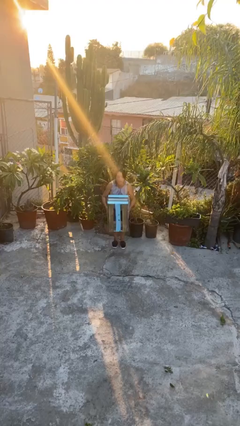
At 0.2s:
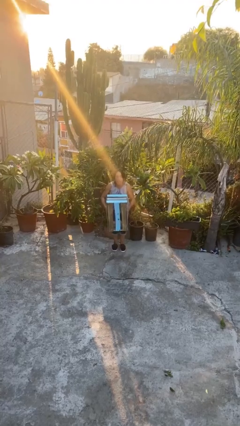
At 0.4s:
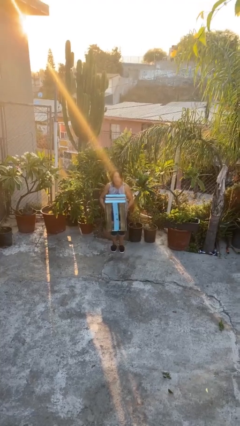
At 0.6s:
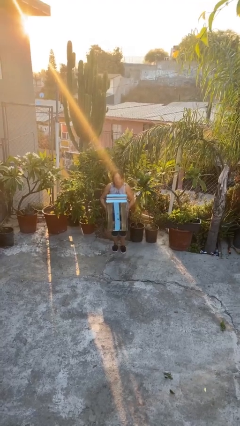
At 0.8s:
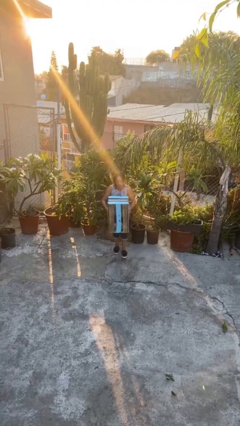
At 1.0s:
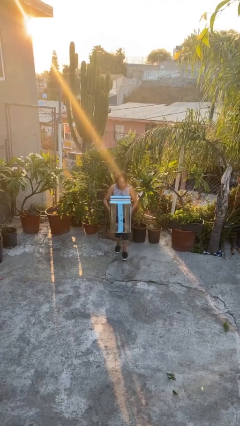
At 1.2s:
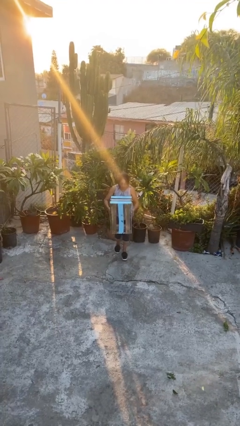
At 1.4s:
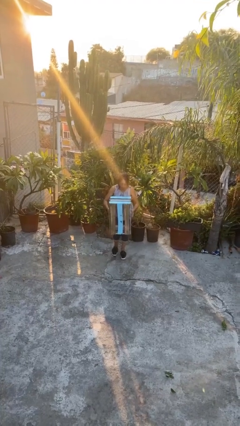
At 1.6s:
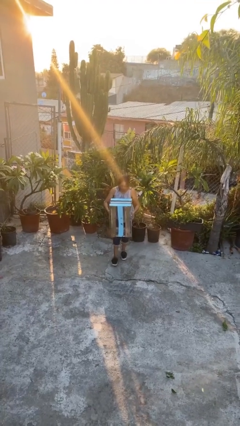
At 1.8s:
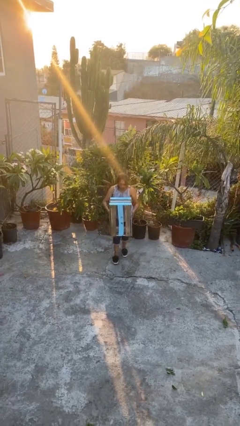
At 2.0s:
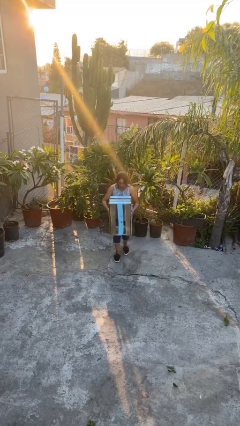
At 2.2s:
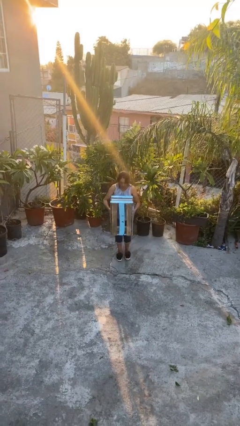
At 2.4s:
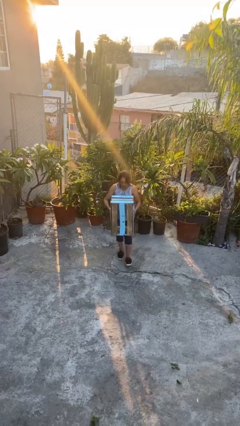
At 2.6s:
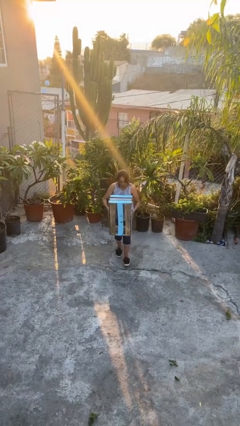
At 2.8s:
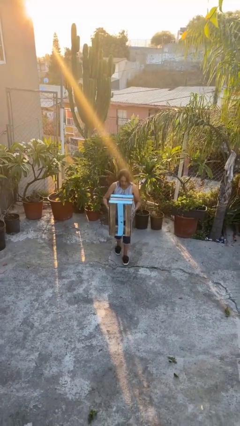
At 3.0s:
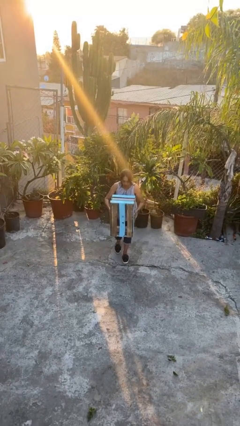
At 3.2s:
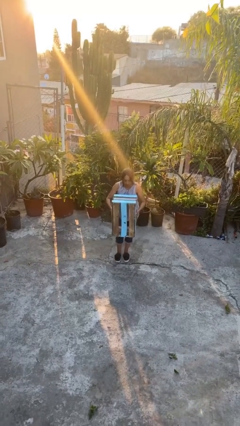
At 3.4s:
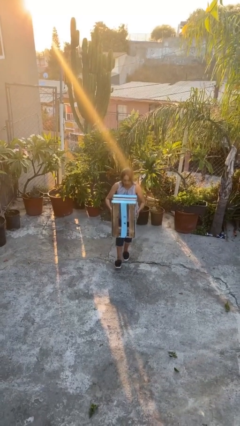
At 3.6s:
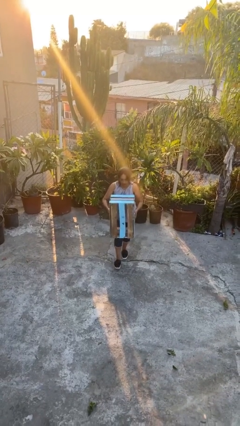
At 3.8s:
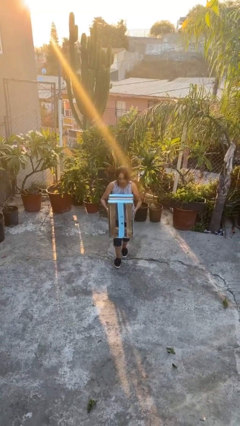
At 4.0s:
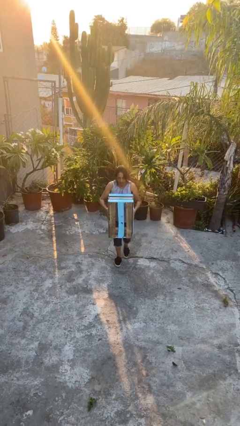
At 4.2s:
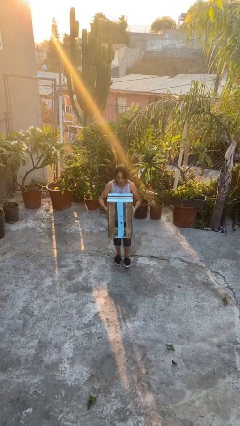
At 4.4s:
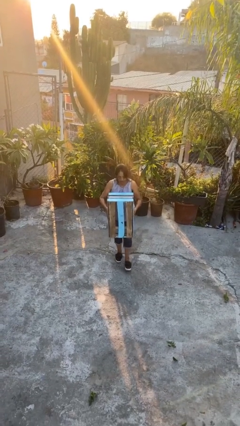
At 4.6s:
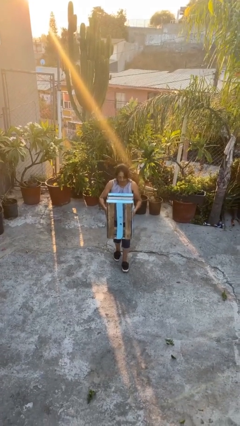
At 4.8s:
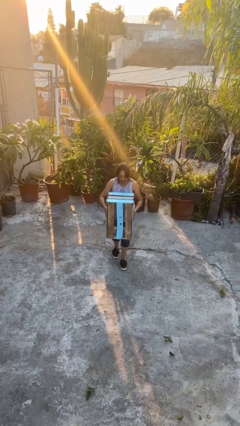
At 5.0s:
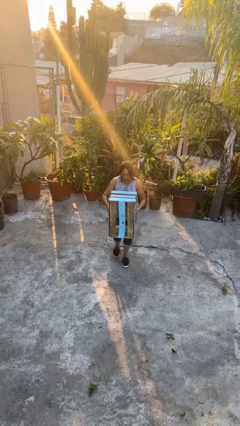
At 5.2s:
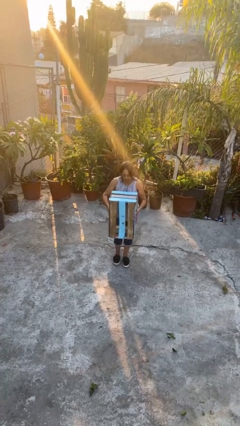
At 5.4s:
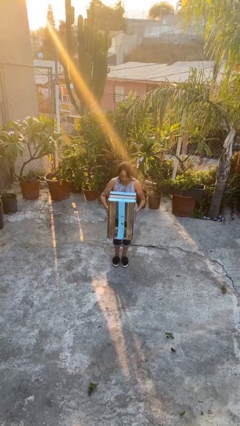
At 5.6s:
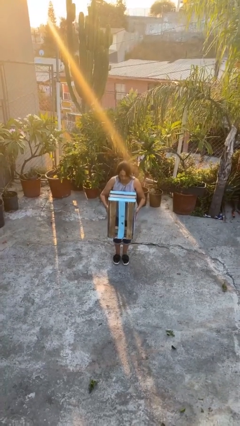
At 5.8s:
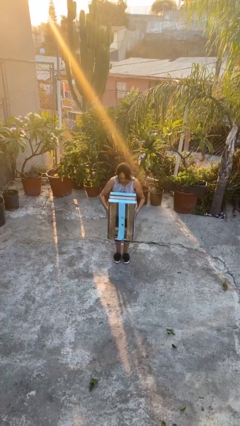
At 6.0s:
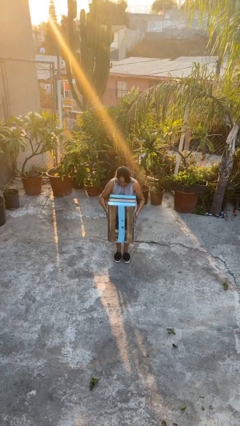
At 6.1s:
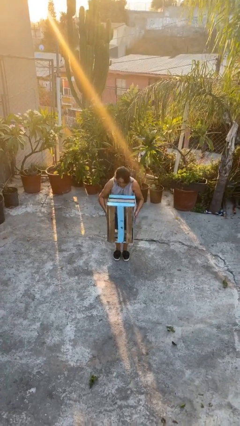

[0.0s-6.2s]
person carries heavy object

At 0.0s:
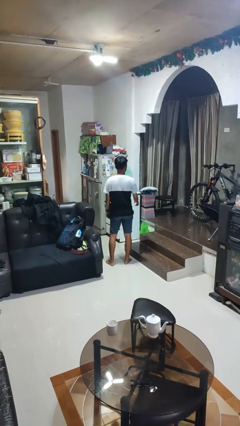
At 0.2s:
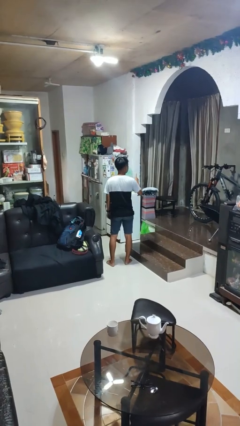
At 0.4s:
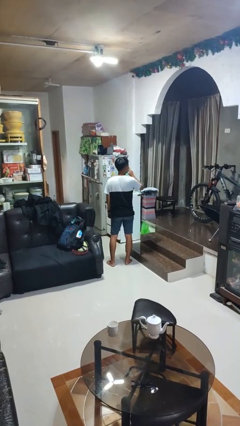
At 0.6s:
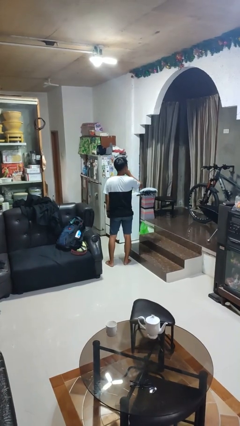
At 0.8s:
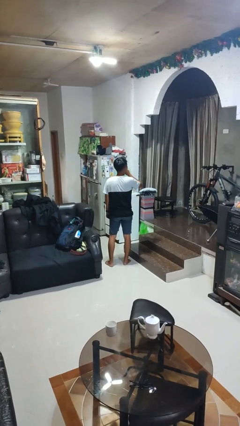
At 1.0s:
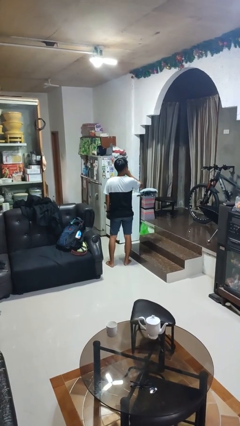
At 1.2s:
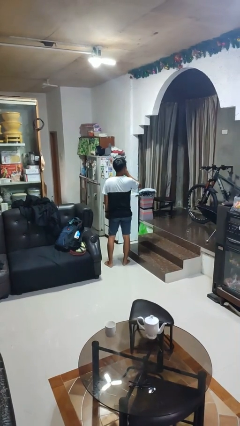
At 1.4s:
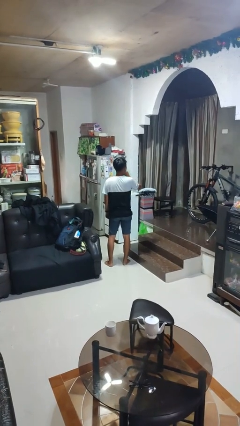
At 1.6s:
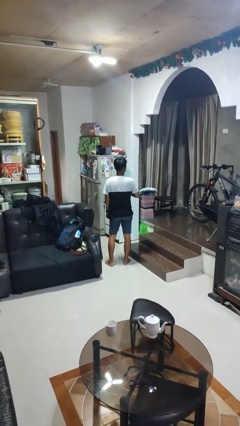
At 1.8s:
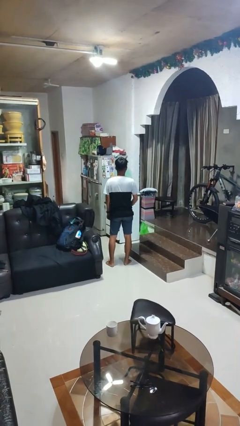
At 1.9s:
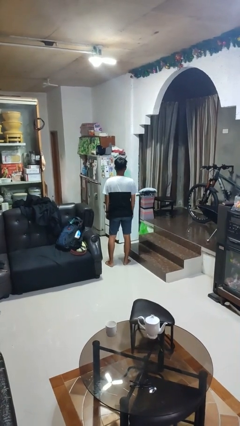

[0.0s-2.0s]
person gestures behind me

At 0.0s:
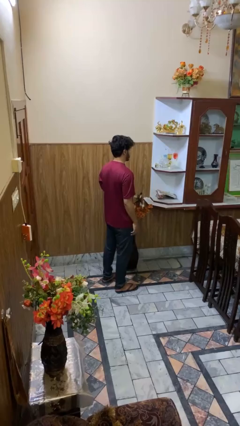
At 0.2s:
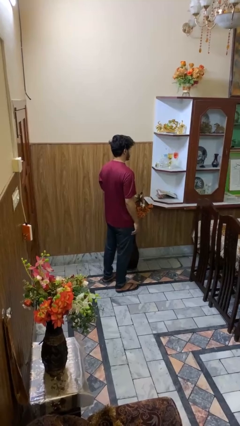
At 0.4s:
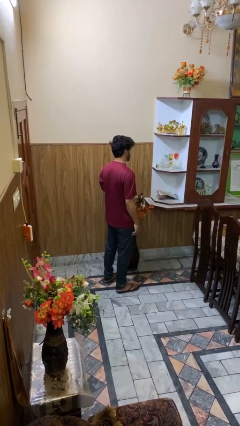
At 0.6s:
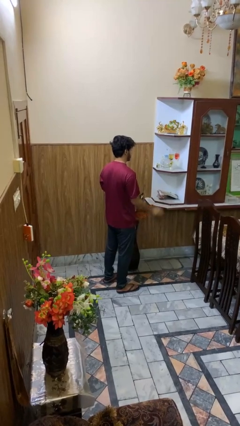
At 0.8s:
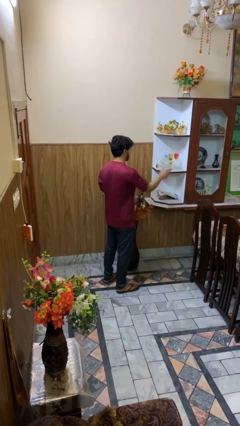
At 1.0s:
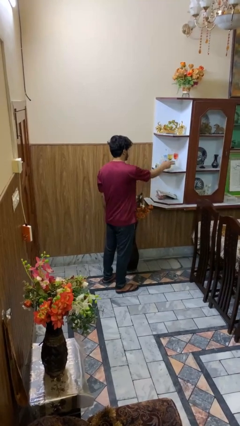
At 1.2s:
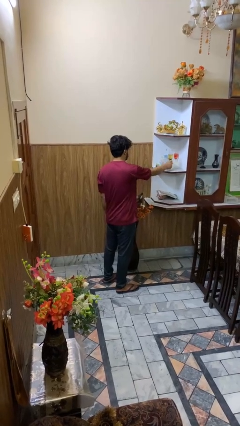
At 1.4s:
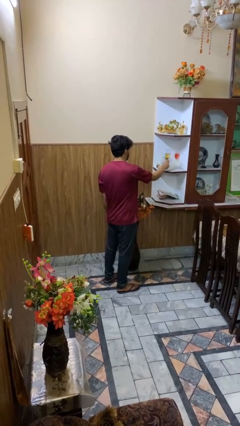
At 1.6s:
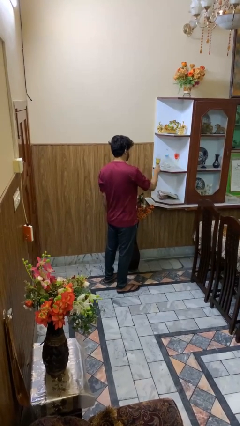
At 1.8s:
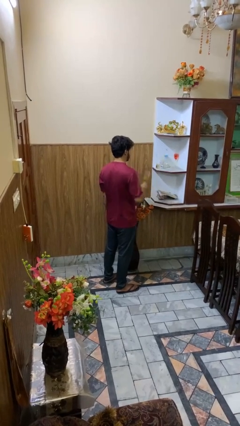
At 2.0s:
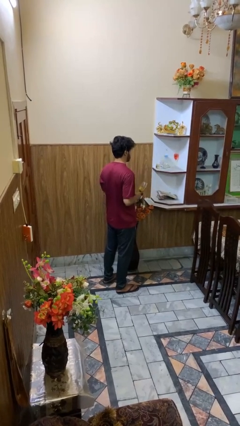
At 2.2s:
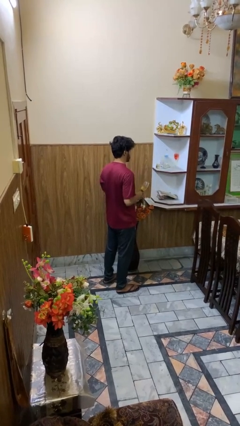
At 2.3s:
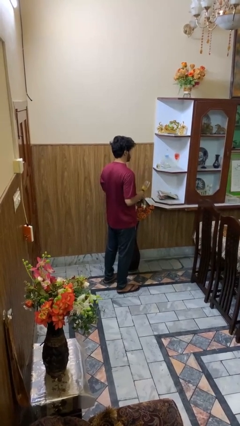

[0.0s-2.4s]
person picks up object from cabinet

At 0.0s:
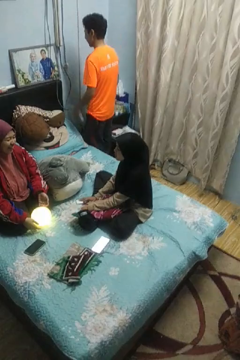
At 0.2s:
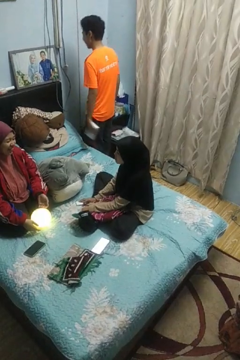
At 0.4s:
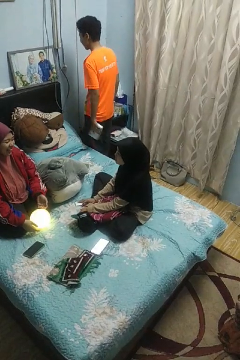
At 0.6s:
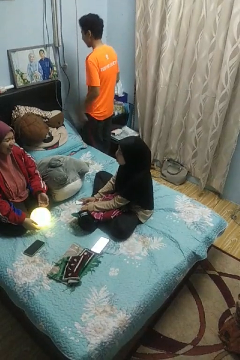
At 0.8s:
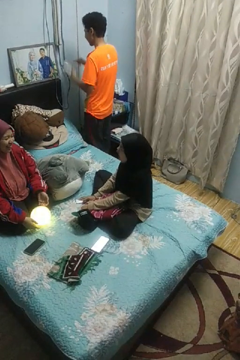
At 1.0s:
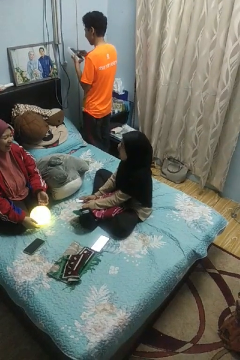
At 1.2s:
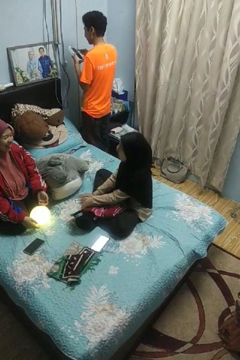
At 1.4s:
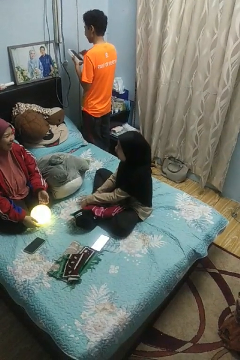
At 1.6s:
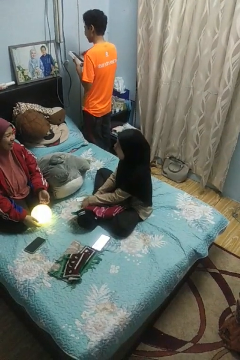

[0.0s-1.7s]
person laughs with person

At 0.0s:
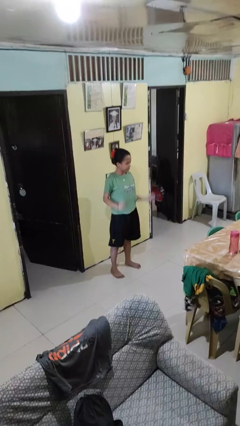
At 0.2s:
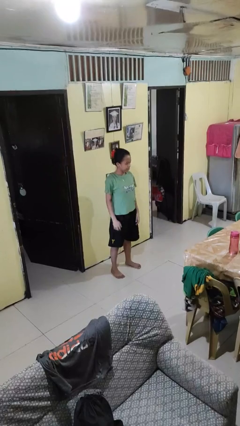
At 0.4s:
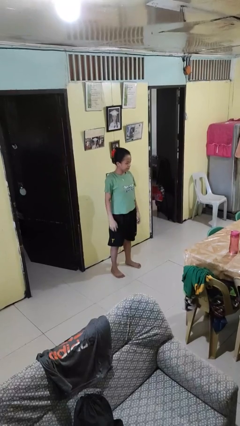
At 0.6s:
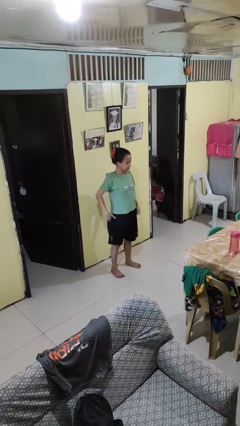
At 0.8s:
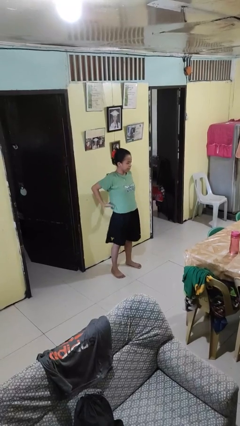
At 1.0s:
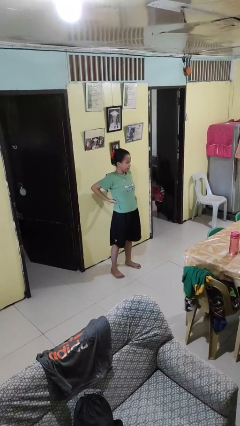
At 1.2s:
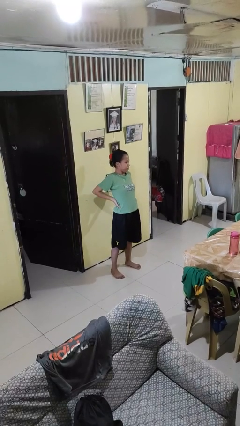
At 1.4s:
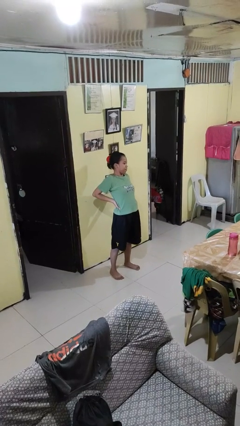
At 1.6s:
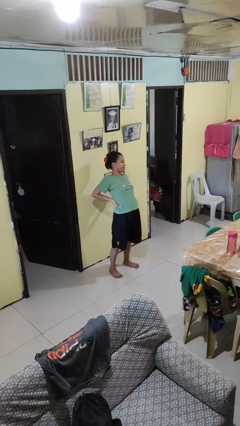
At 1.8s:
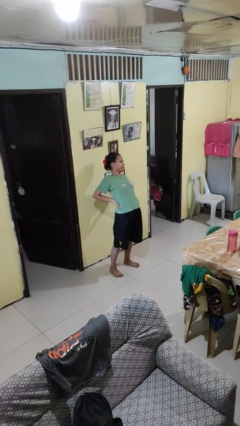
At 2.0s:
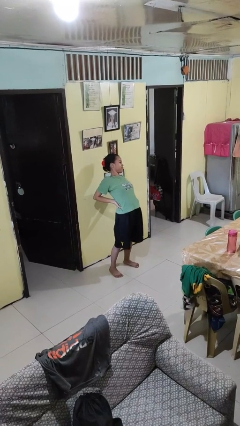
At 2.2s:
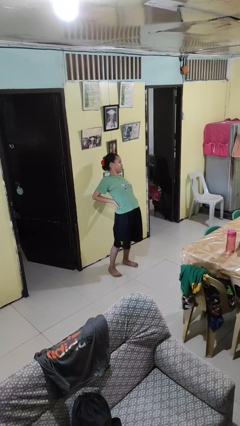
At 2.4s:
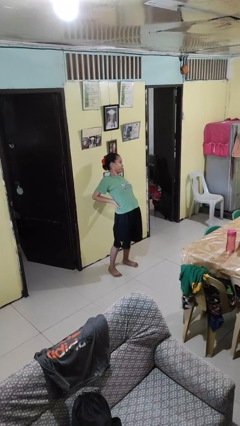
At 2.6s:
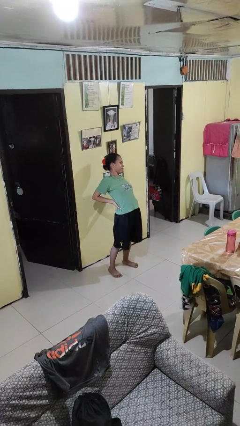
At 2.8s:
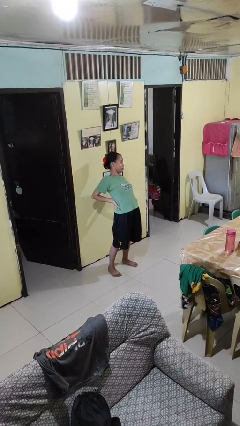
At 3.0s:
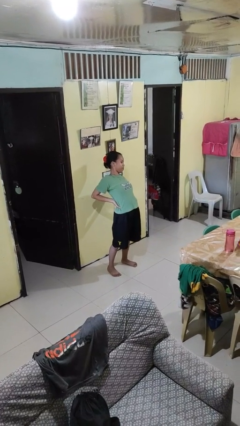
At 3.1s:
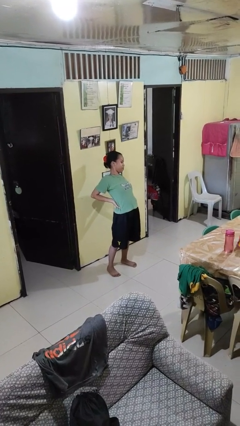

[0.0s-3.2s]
person stretches back

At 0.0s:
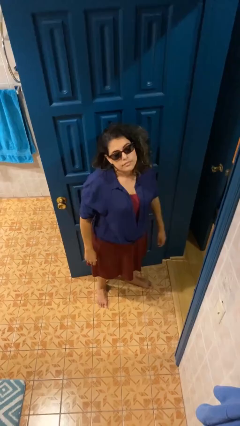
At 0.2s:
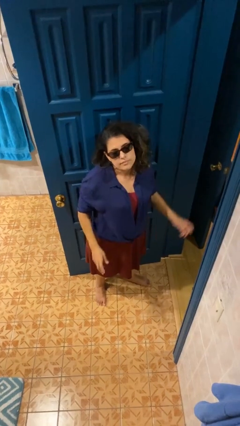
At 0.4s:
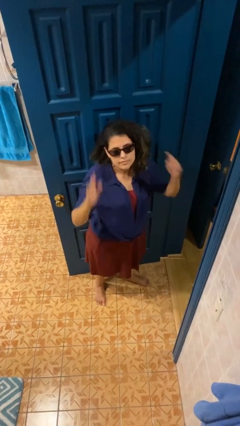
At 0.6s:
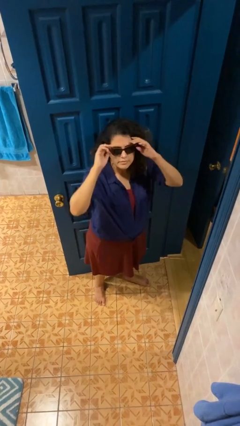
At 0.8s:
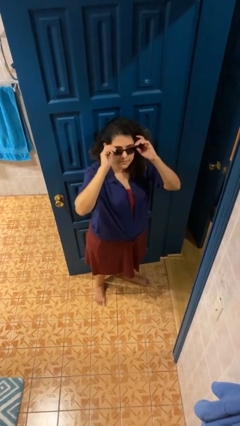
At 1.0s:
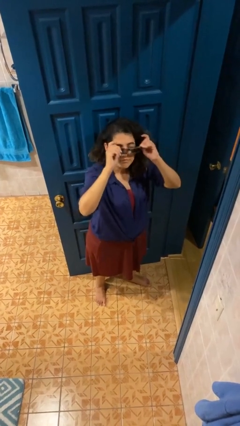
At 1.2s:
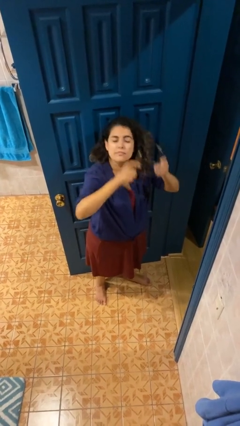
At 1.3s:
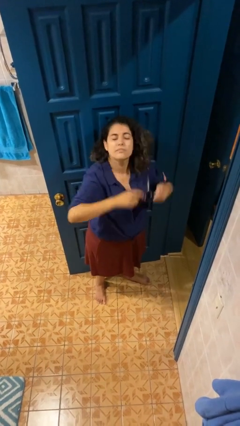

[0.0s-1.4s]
person takes off sunglasses

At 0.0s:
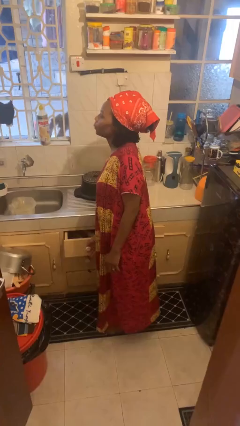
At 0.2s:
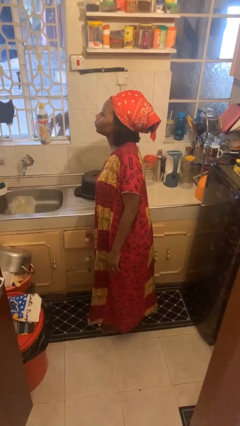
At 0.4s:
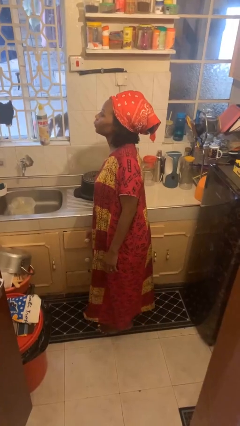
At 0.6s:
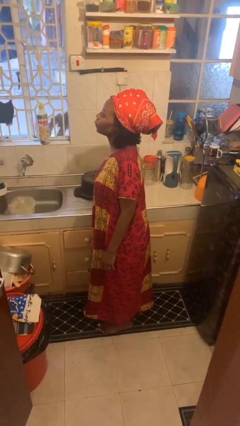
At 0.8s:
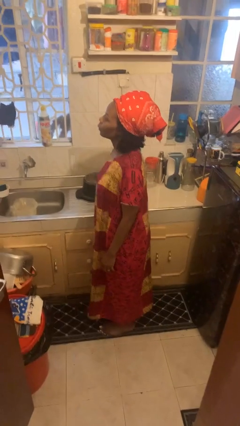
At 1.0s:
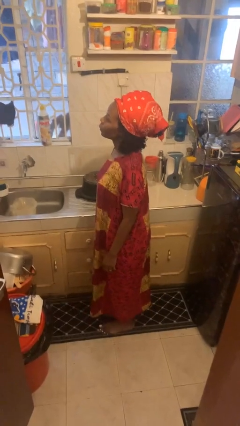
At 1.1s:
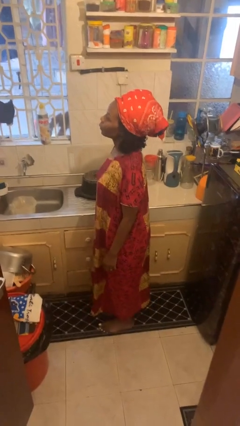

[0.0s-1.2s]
person closes kitchen drawer
